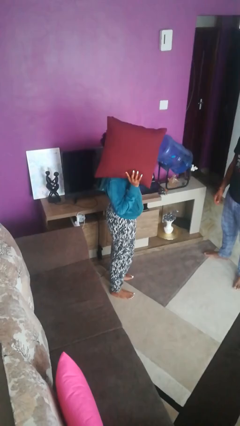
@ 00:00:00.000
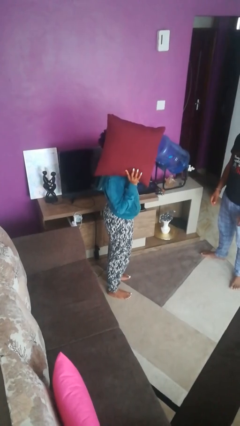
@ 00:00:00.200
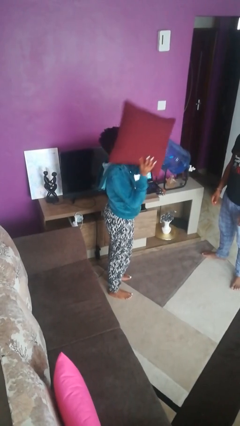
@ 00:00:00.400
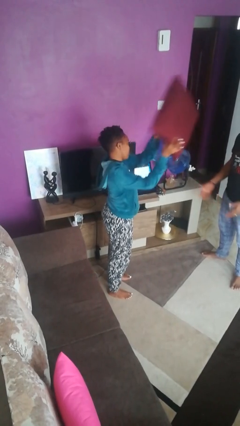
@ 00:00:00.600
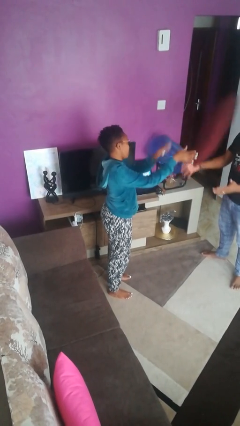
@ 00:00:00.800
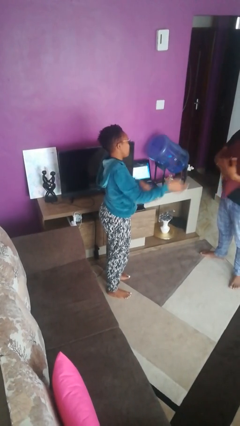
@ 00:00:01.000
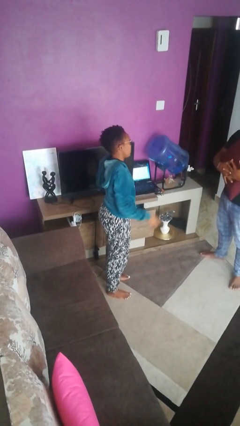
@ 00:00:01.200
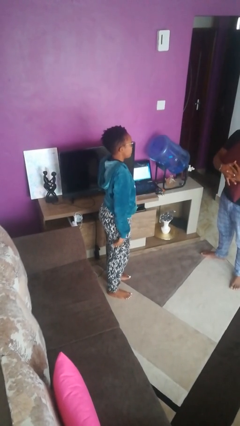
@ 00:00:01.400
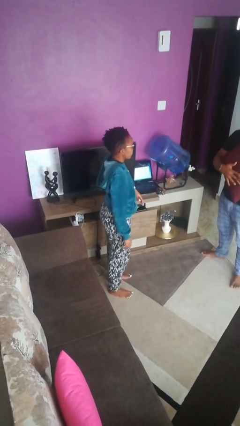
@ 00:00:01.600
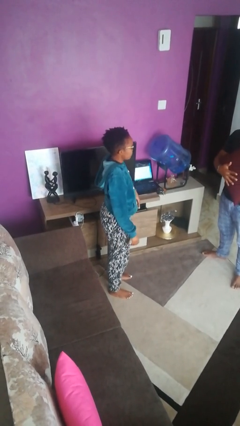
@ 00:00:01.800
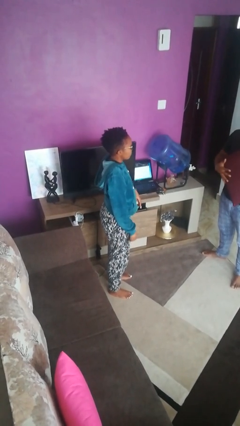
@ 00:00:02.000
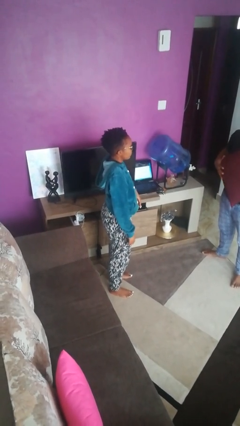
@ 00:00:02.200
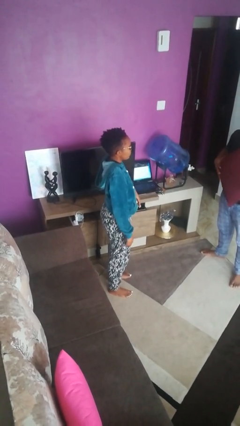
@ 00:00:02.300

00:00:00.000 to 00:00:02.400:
person throws object to person

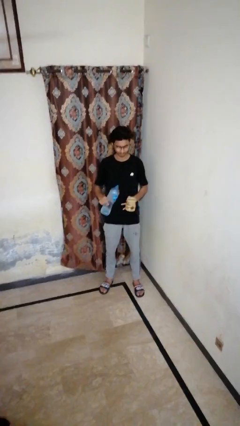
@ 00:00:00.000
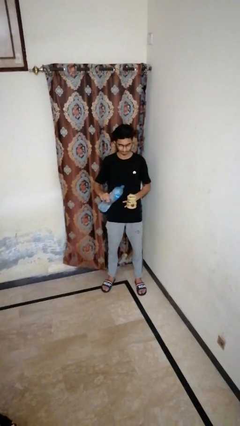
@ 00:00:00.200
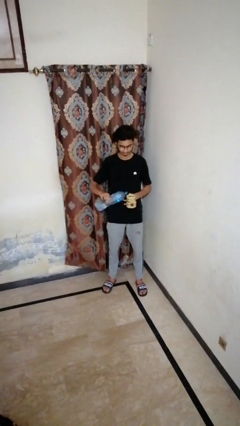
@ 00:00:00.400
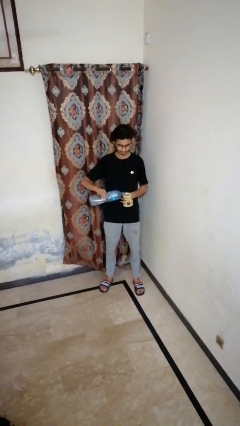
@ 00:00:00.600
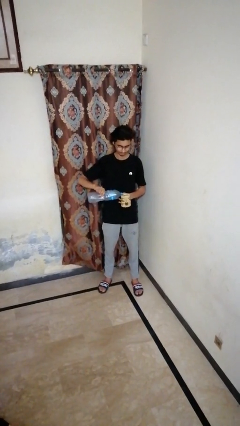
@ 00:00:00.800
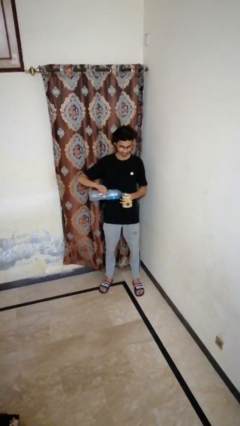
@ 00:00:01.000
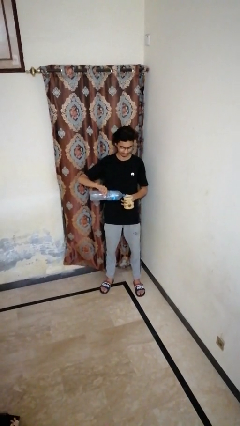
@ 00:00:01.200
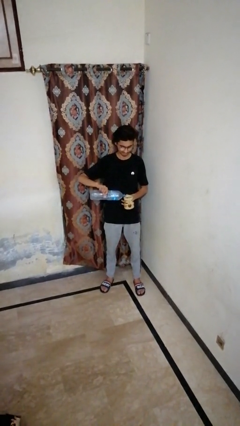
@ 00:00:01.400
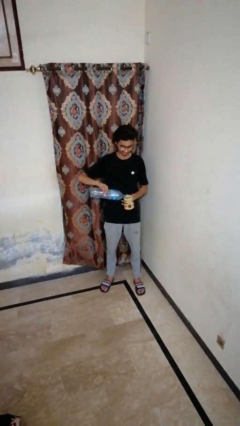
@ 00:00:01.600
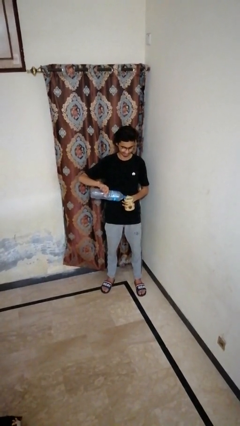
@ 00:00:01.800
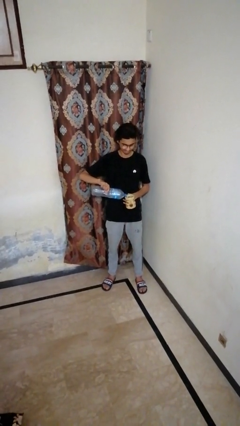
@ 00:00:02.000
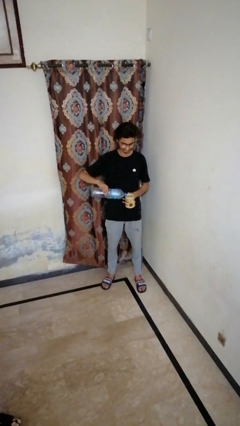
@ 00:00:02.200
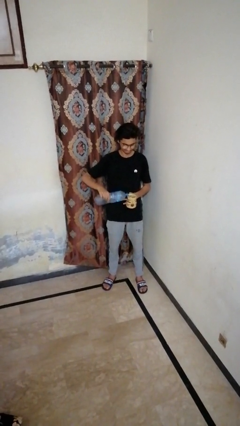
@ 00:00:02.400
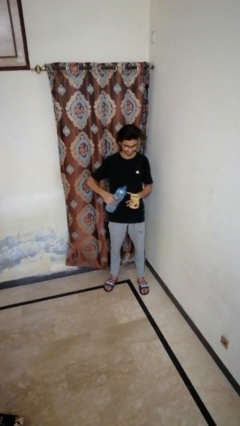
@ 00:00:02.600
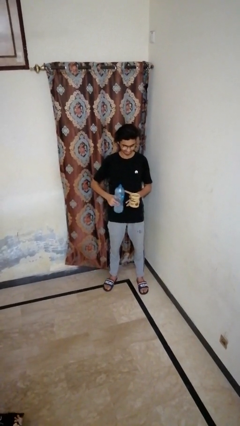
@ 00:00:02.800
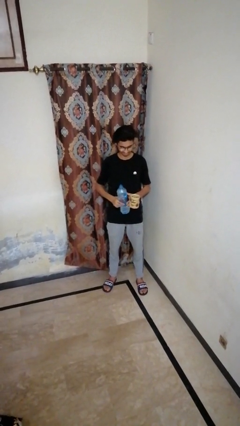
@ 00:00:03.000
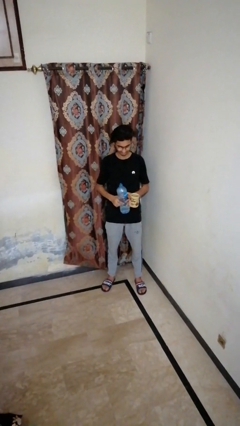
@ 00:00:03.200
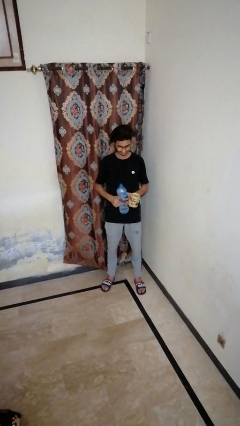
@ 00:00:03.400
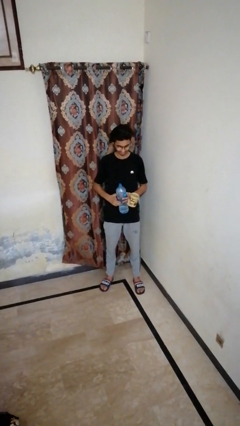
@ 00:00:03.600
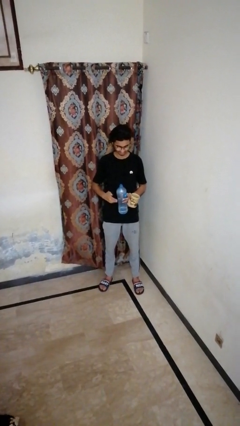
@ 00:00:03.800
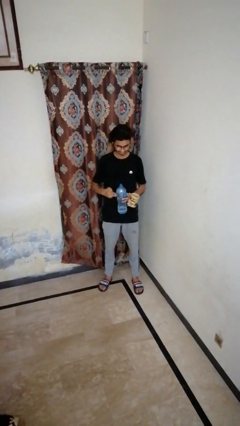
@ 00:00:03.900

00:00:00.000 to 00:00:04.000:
person pours liquid into cup

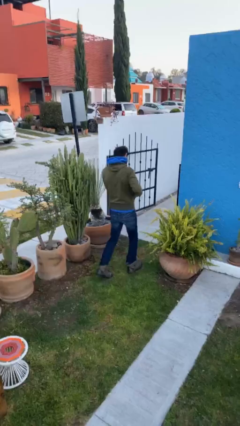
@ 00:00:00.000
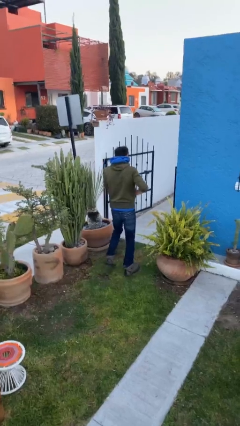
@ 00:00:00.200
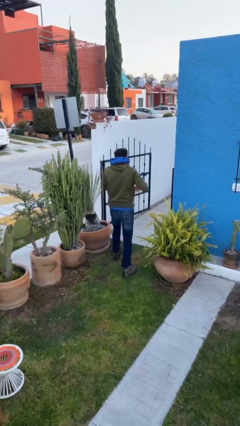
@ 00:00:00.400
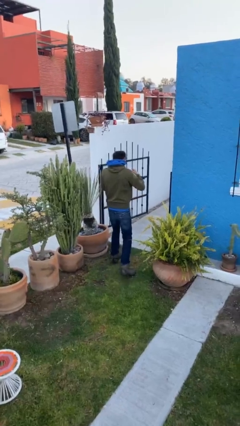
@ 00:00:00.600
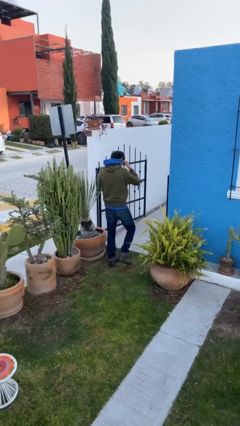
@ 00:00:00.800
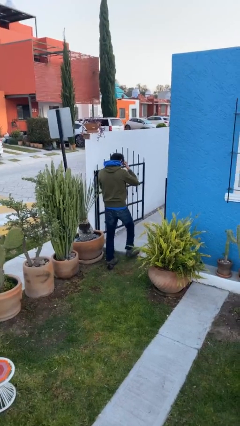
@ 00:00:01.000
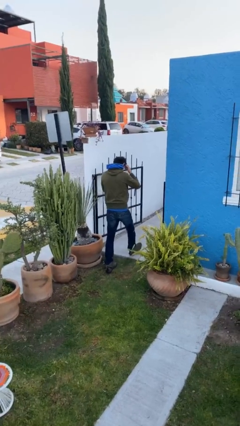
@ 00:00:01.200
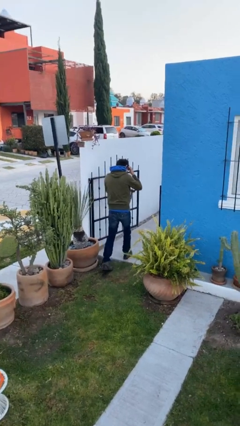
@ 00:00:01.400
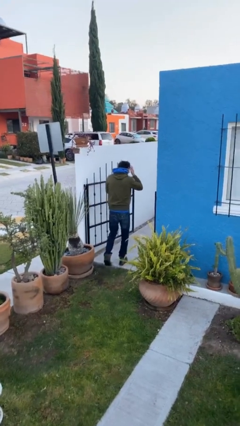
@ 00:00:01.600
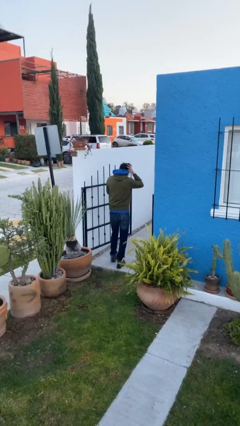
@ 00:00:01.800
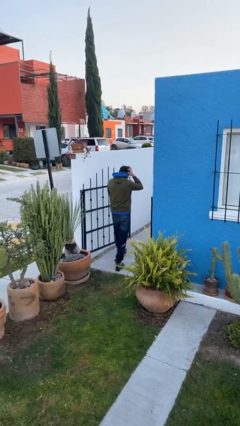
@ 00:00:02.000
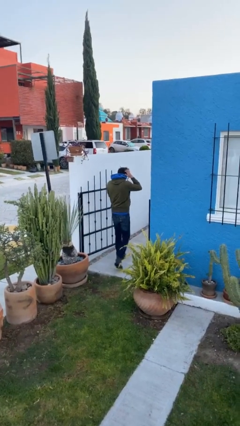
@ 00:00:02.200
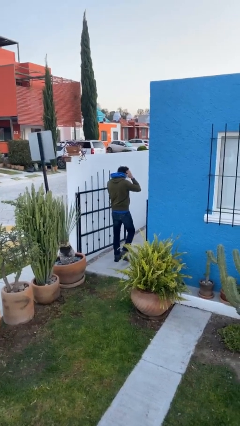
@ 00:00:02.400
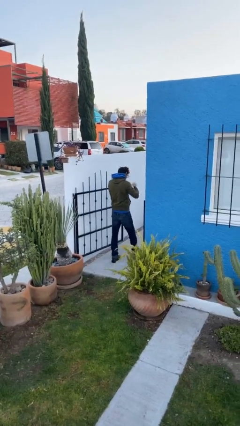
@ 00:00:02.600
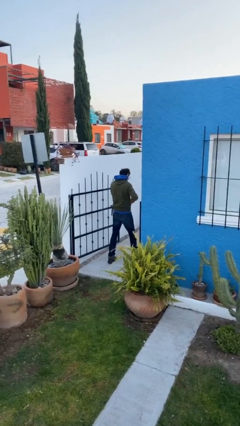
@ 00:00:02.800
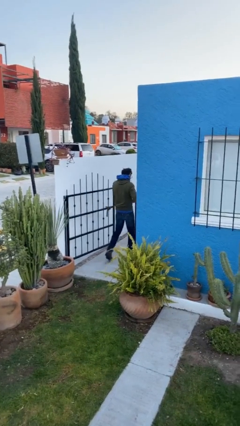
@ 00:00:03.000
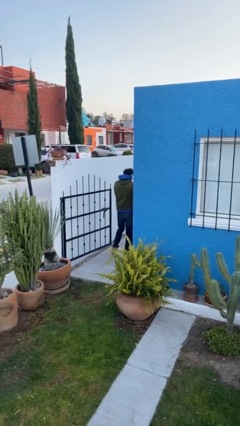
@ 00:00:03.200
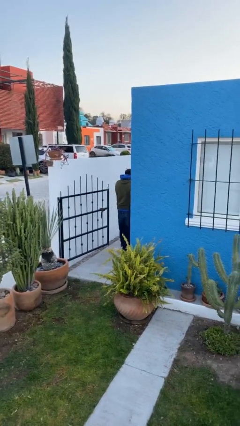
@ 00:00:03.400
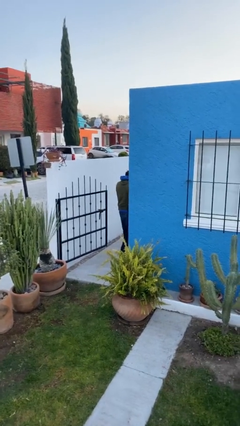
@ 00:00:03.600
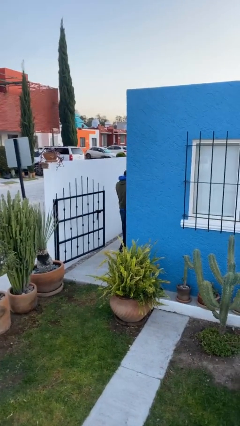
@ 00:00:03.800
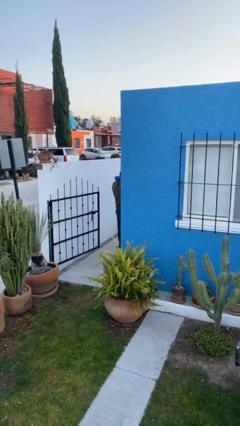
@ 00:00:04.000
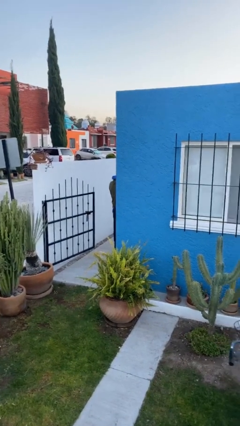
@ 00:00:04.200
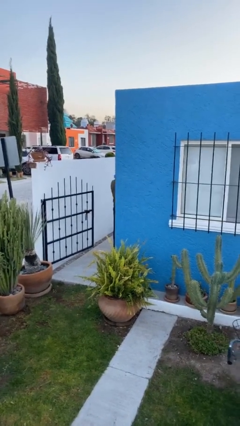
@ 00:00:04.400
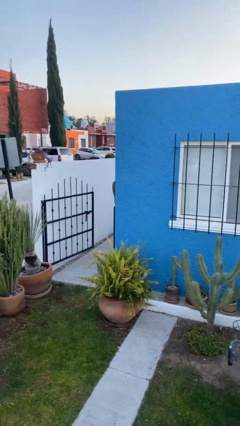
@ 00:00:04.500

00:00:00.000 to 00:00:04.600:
person exits scene through structure

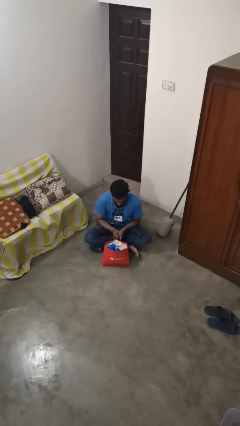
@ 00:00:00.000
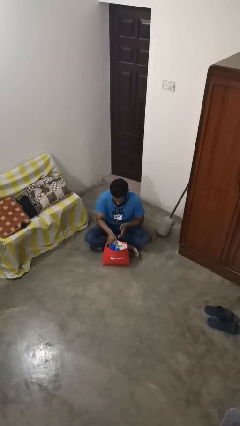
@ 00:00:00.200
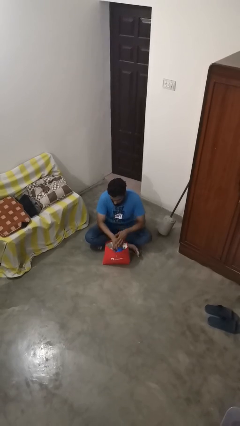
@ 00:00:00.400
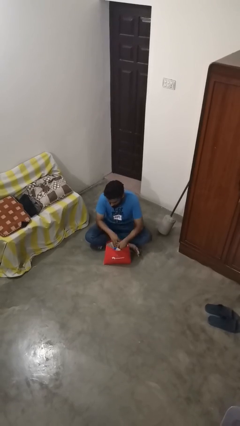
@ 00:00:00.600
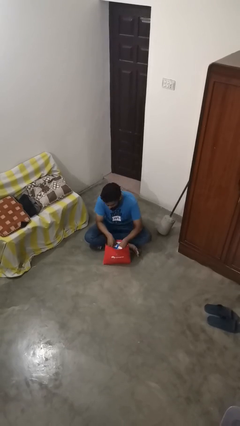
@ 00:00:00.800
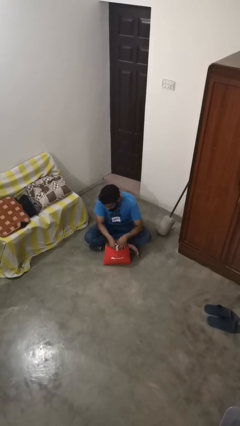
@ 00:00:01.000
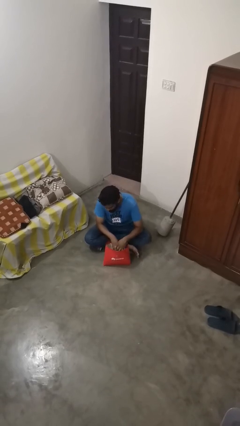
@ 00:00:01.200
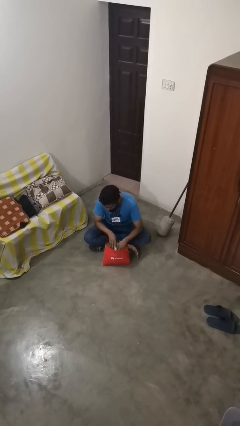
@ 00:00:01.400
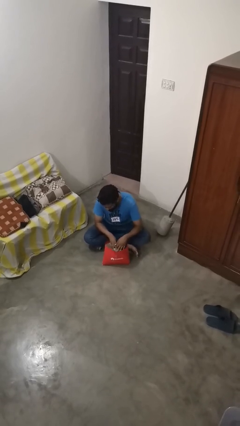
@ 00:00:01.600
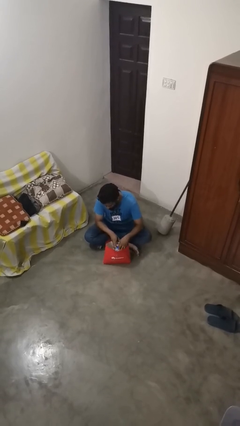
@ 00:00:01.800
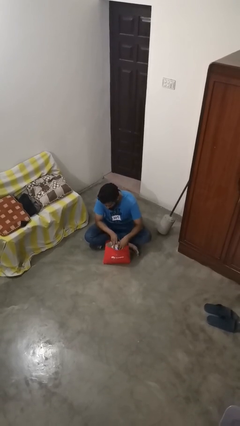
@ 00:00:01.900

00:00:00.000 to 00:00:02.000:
person searches in bag

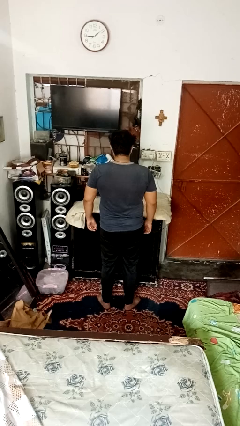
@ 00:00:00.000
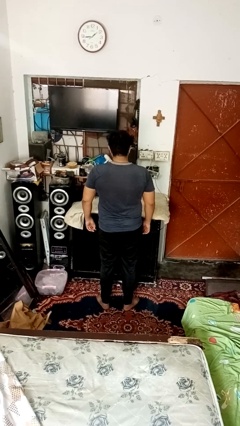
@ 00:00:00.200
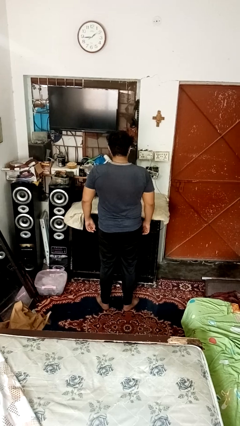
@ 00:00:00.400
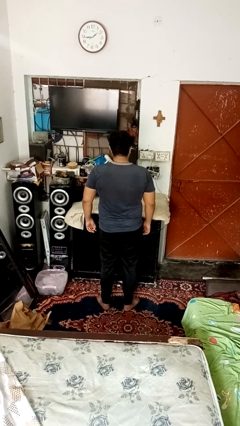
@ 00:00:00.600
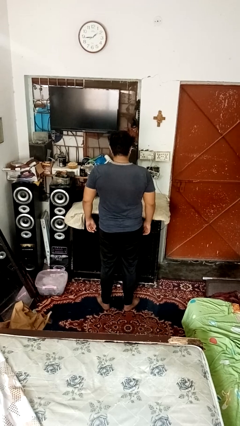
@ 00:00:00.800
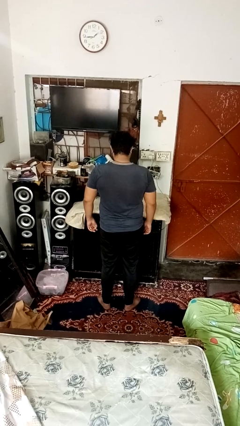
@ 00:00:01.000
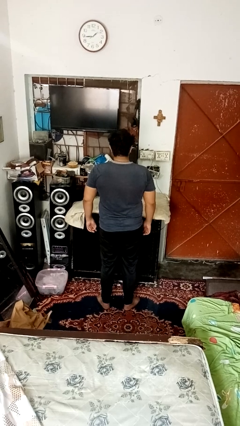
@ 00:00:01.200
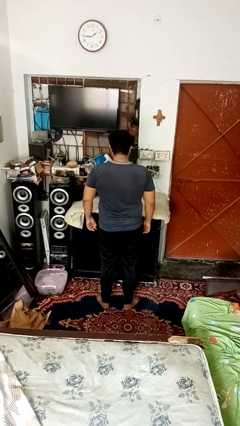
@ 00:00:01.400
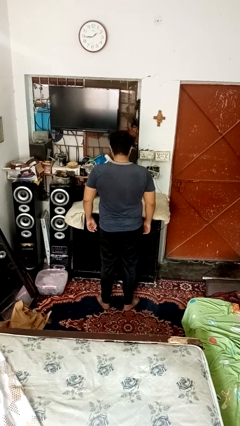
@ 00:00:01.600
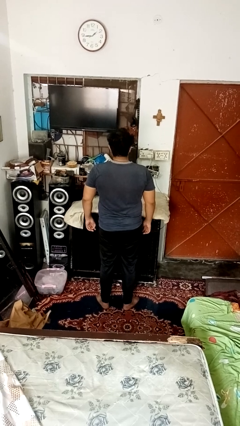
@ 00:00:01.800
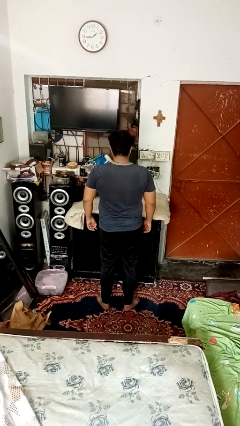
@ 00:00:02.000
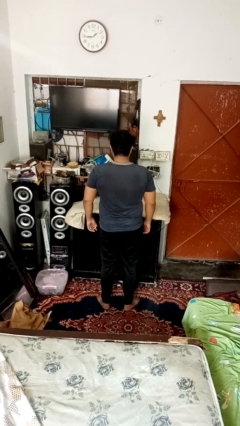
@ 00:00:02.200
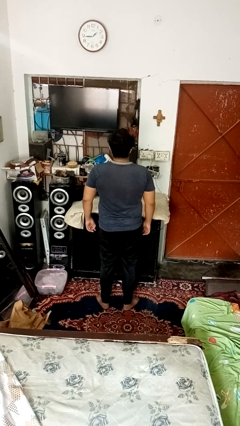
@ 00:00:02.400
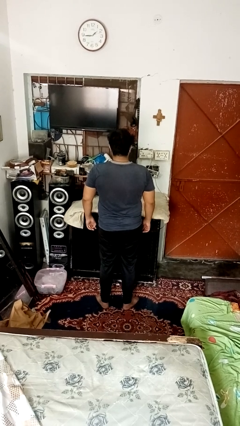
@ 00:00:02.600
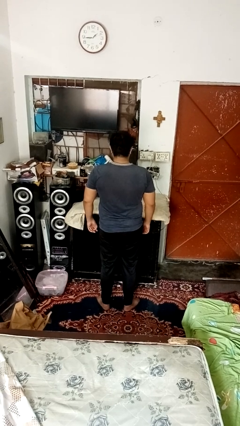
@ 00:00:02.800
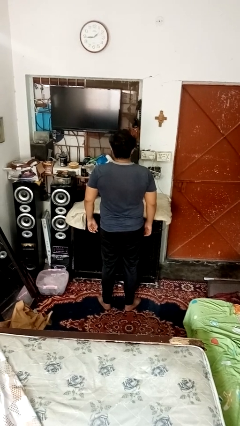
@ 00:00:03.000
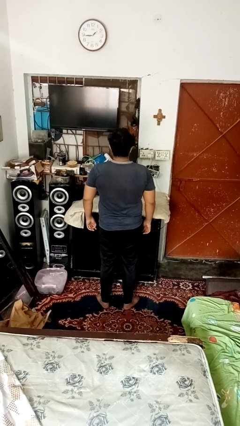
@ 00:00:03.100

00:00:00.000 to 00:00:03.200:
person nods head

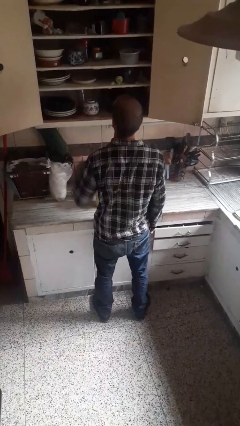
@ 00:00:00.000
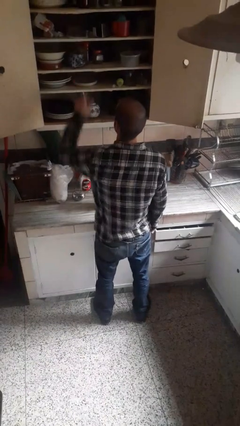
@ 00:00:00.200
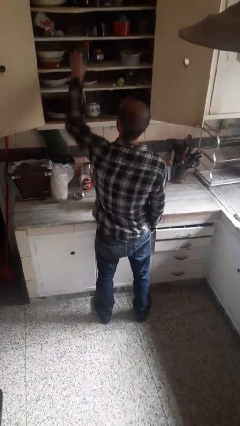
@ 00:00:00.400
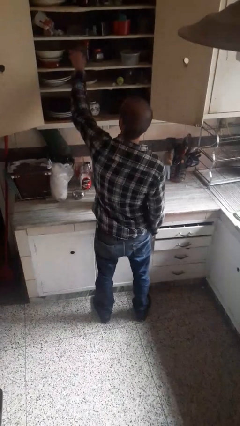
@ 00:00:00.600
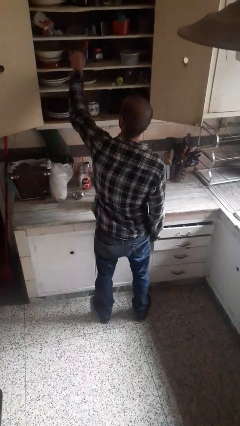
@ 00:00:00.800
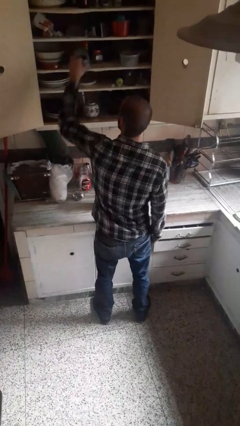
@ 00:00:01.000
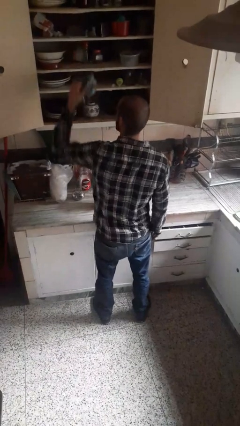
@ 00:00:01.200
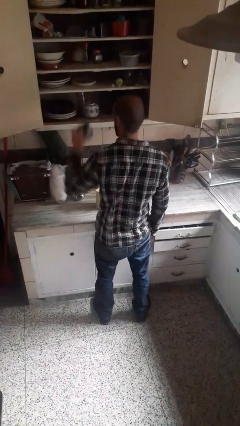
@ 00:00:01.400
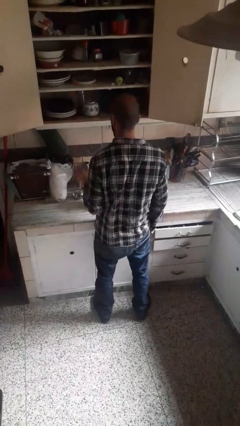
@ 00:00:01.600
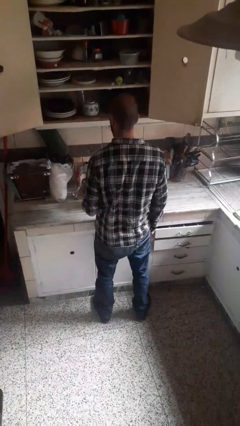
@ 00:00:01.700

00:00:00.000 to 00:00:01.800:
person takes object from cabinet
